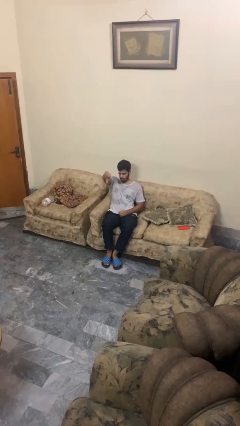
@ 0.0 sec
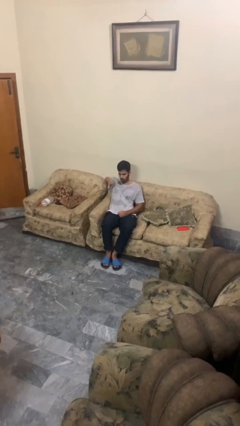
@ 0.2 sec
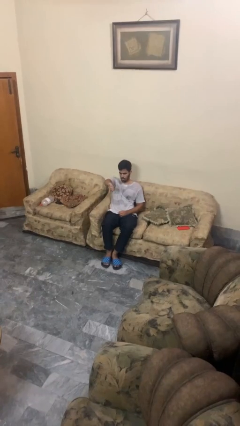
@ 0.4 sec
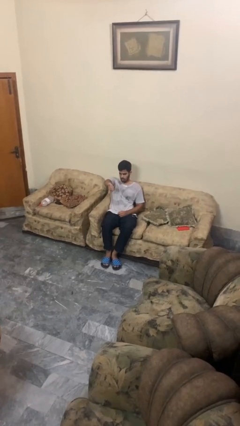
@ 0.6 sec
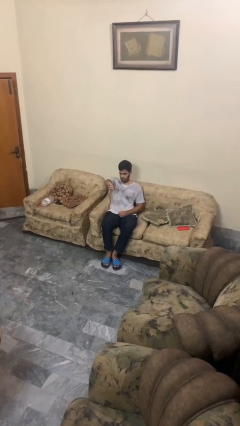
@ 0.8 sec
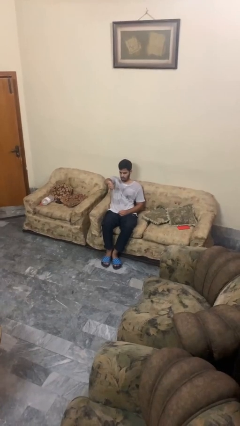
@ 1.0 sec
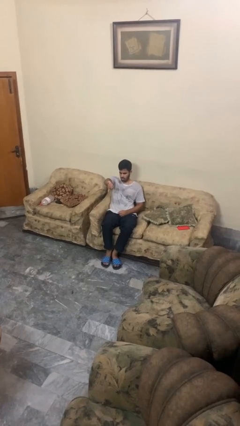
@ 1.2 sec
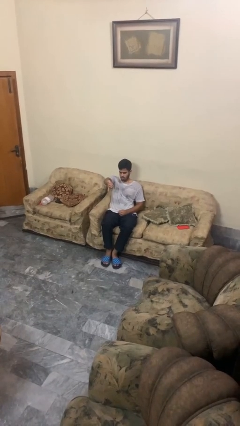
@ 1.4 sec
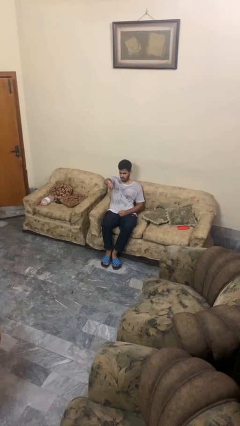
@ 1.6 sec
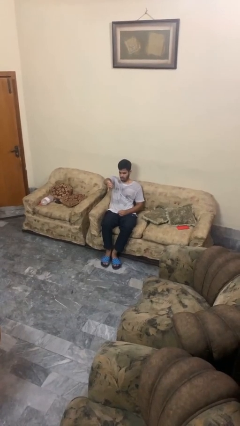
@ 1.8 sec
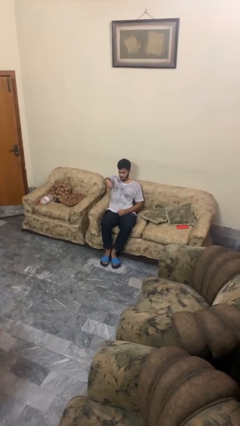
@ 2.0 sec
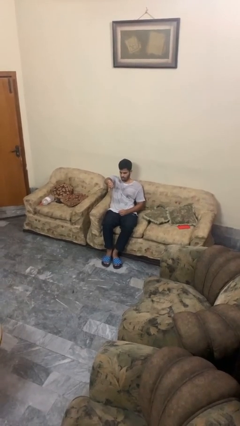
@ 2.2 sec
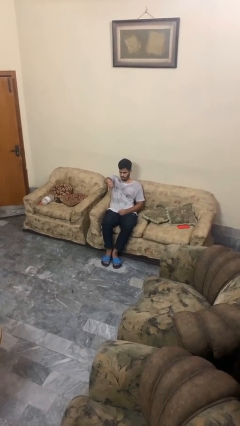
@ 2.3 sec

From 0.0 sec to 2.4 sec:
person gestures thumbs down

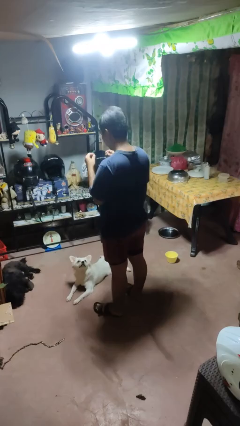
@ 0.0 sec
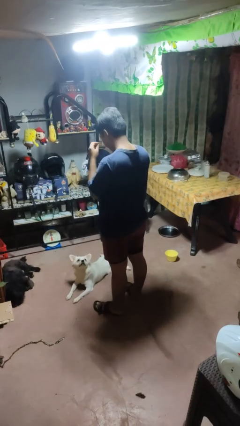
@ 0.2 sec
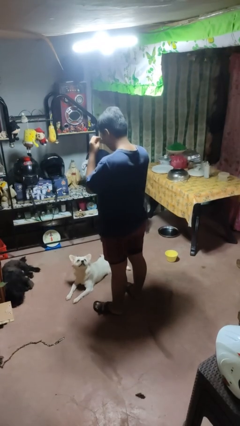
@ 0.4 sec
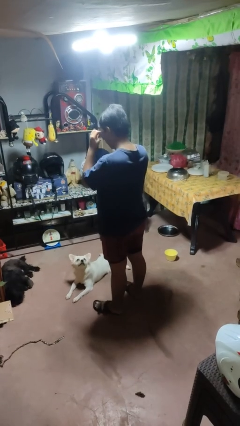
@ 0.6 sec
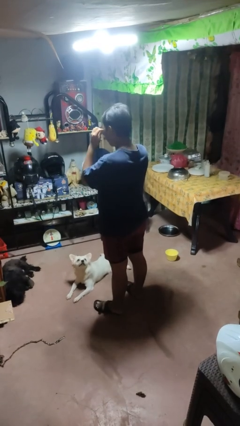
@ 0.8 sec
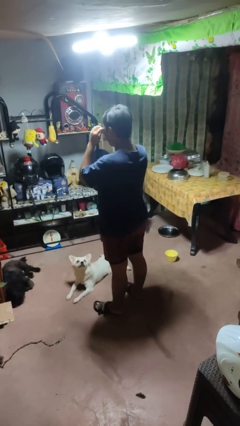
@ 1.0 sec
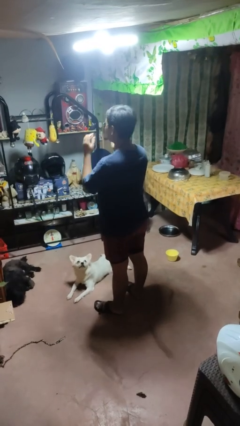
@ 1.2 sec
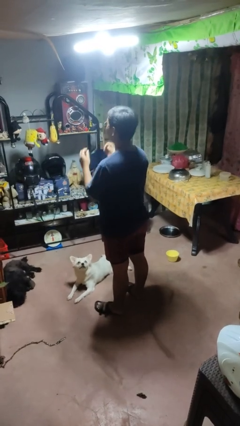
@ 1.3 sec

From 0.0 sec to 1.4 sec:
person puts on sunglasses

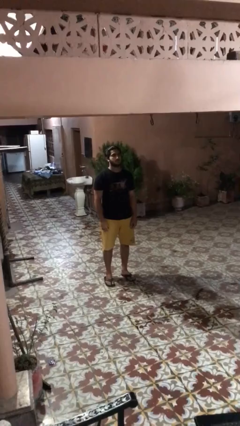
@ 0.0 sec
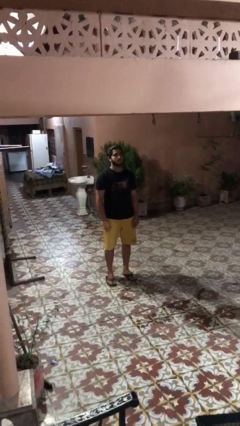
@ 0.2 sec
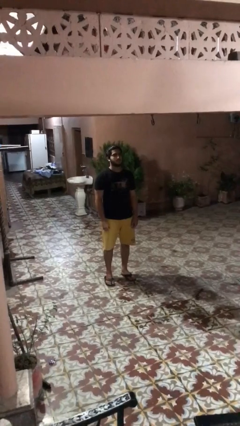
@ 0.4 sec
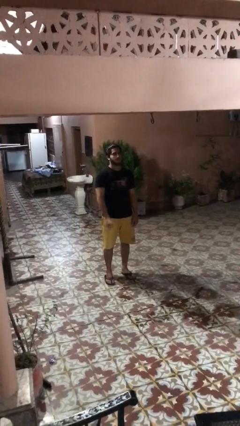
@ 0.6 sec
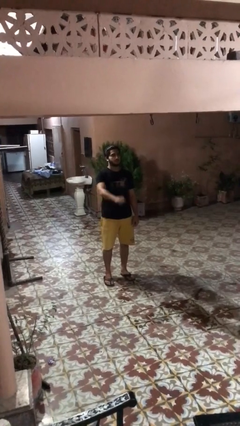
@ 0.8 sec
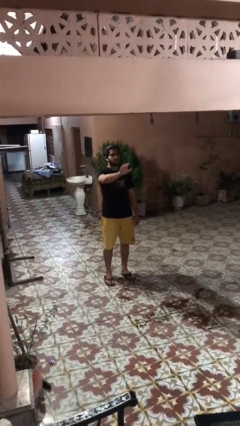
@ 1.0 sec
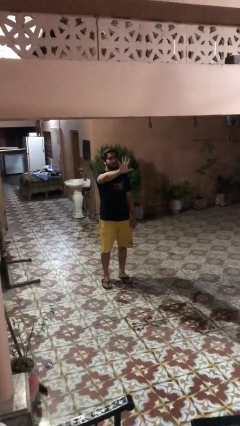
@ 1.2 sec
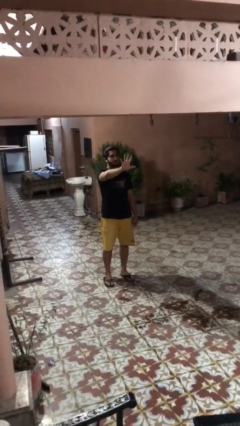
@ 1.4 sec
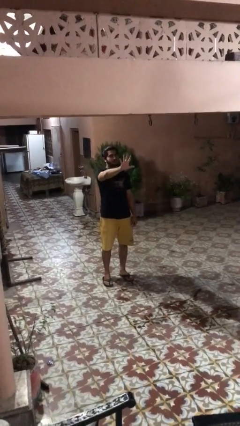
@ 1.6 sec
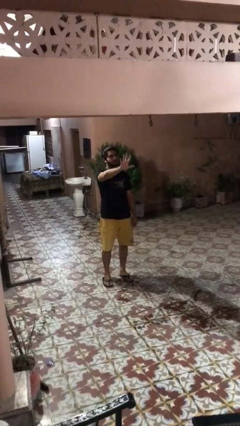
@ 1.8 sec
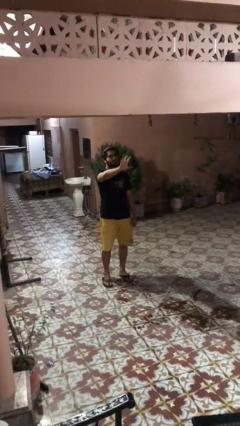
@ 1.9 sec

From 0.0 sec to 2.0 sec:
person gestures number five

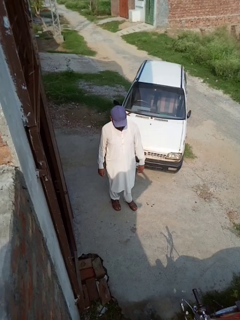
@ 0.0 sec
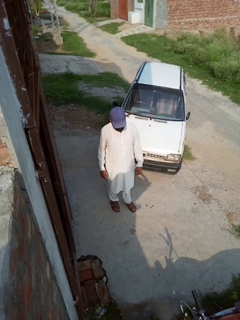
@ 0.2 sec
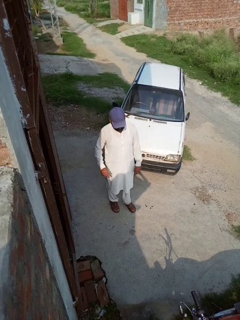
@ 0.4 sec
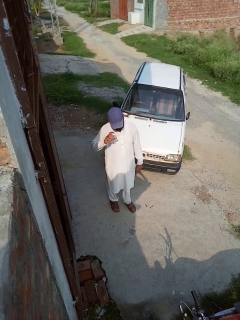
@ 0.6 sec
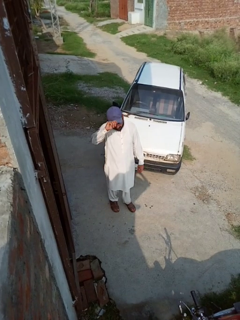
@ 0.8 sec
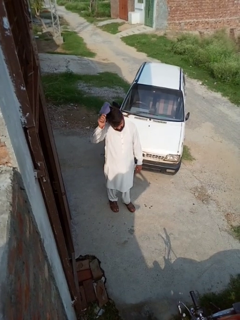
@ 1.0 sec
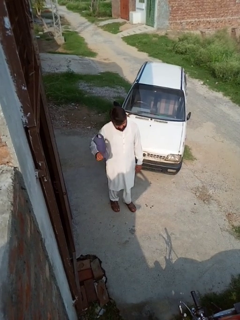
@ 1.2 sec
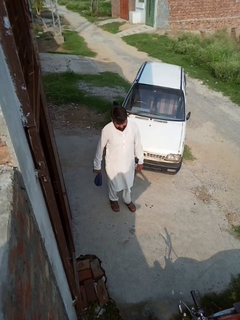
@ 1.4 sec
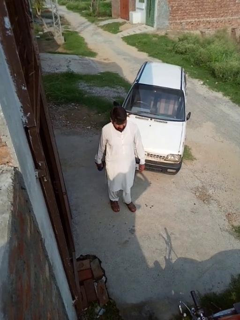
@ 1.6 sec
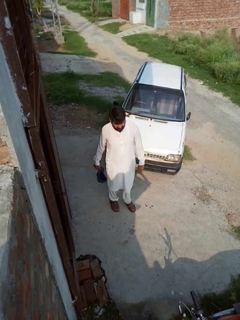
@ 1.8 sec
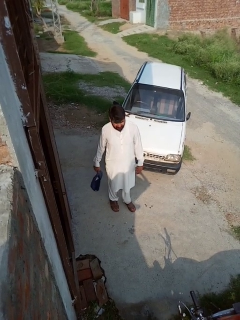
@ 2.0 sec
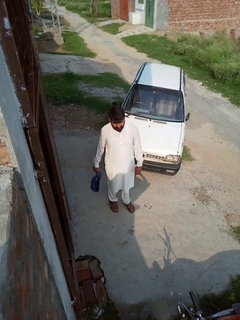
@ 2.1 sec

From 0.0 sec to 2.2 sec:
person takes off hat

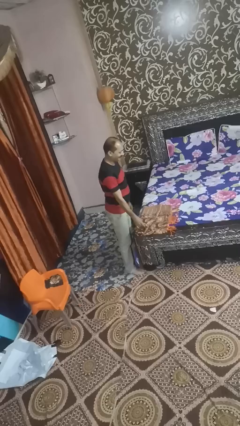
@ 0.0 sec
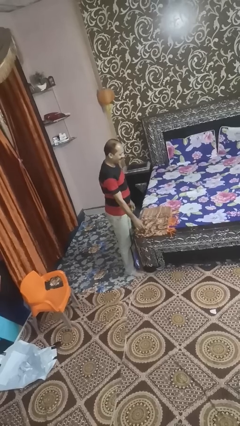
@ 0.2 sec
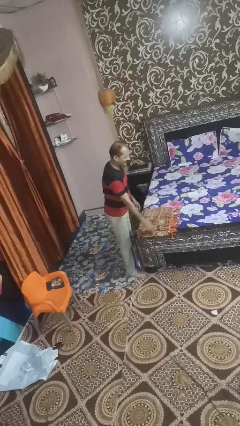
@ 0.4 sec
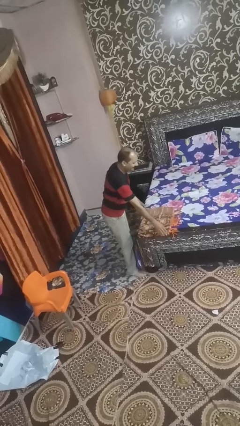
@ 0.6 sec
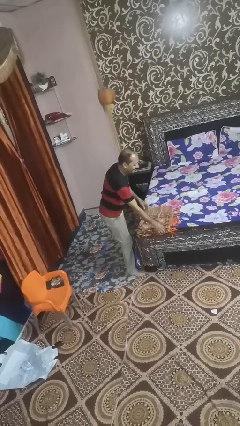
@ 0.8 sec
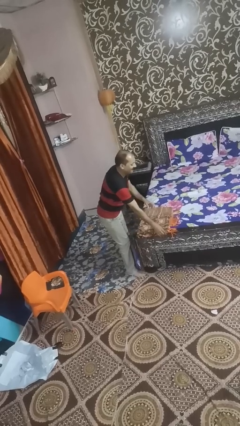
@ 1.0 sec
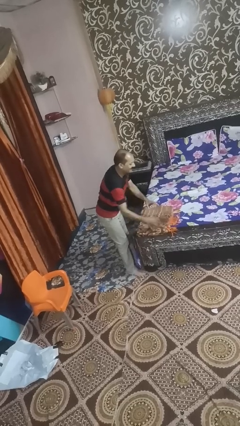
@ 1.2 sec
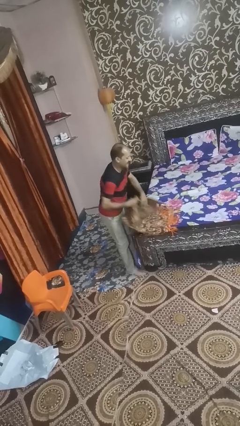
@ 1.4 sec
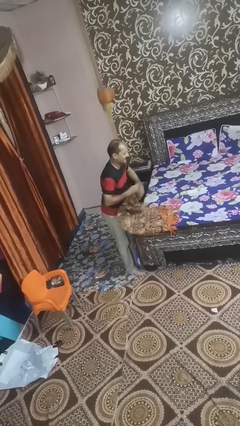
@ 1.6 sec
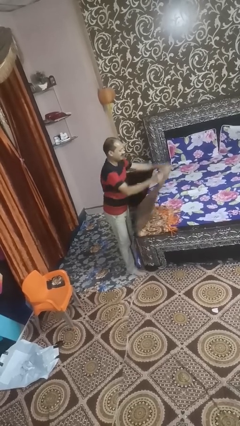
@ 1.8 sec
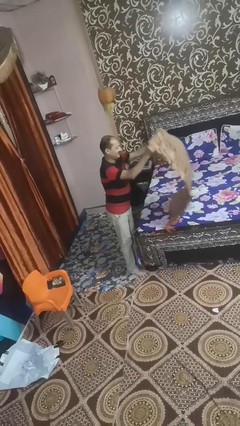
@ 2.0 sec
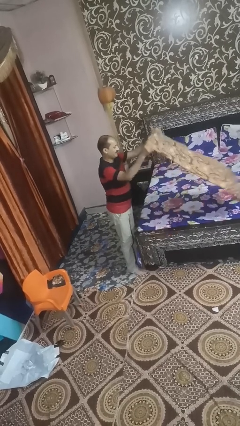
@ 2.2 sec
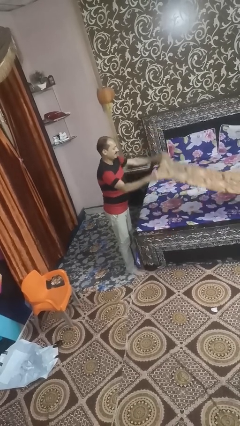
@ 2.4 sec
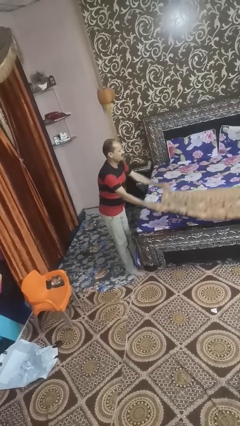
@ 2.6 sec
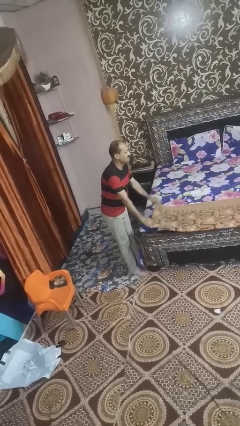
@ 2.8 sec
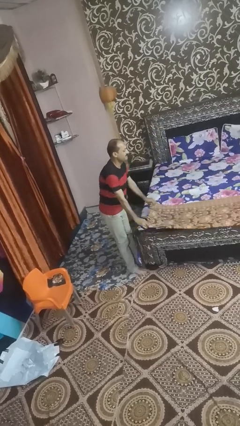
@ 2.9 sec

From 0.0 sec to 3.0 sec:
person unfolds blanket

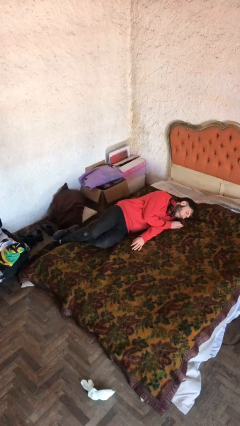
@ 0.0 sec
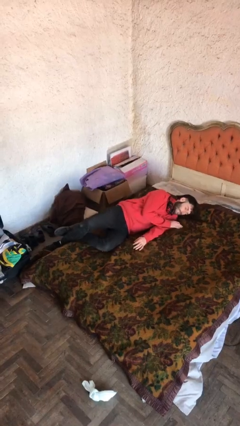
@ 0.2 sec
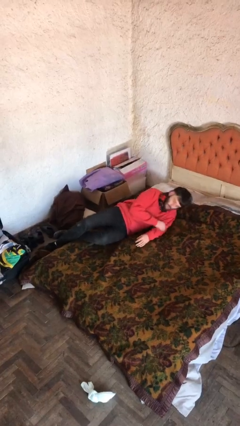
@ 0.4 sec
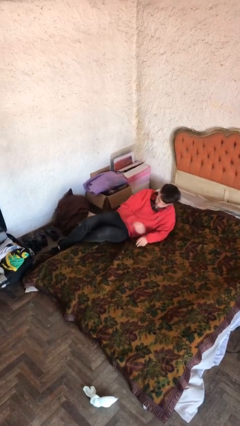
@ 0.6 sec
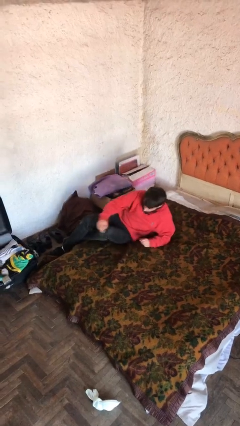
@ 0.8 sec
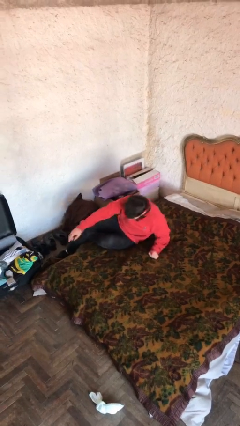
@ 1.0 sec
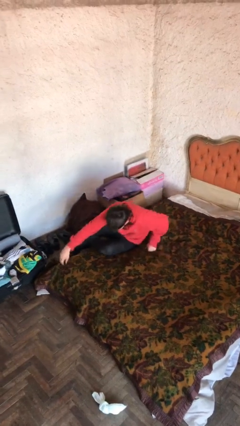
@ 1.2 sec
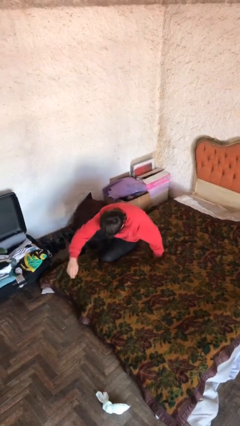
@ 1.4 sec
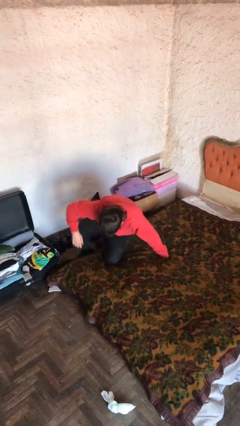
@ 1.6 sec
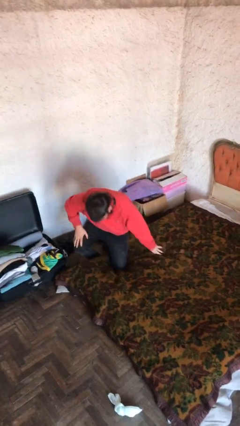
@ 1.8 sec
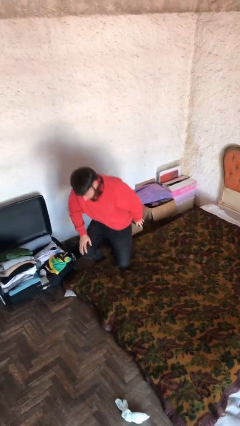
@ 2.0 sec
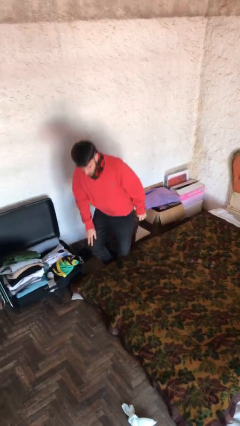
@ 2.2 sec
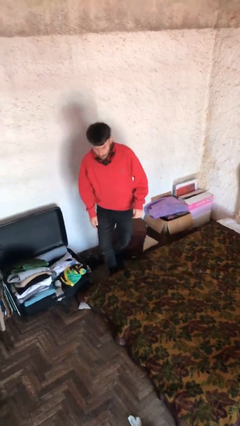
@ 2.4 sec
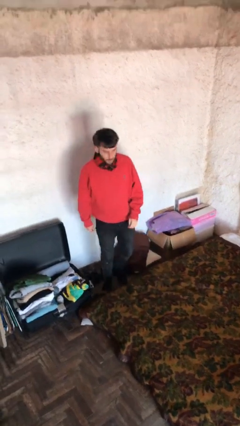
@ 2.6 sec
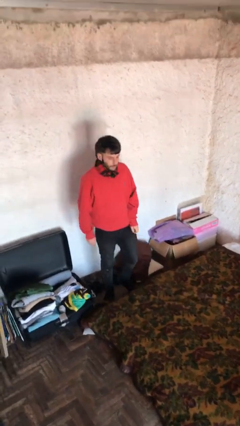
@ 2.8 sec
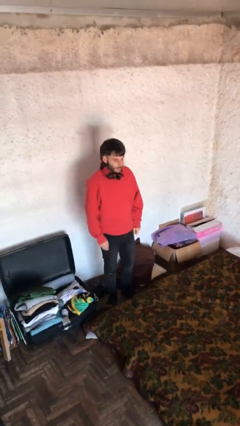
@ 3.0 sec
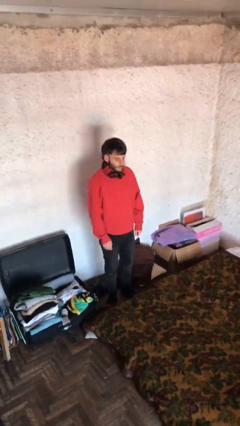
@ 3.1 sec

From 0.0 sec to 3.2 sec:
person stands up

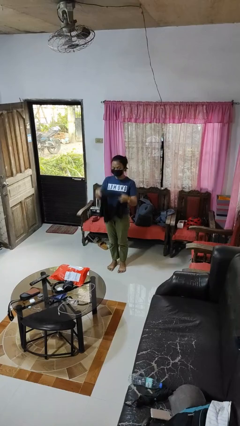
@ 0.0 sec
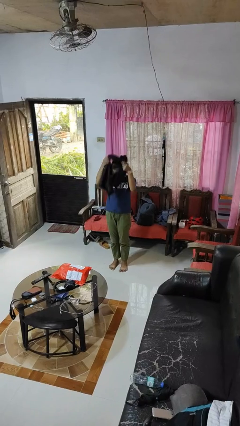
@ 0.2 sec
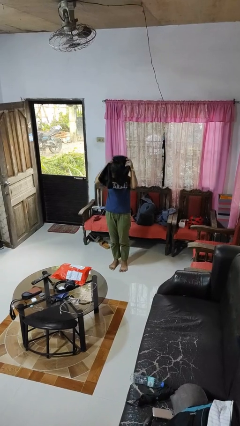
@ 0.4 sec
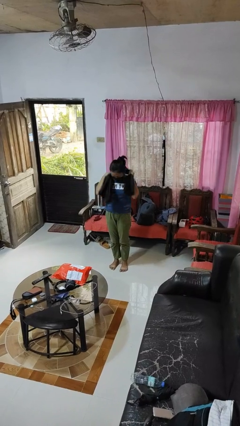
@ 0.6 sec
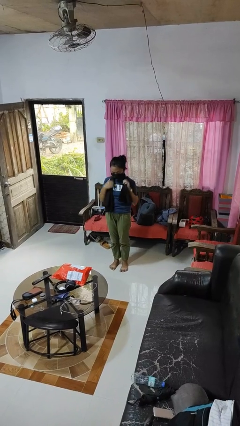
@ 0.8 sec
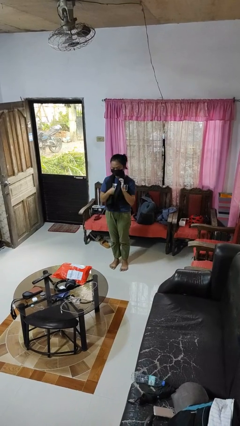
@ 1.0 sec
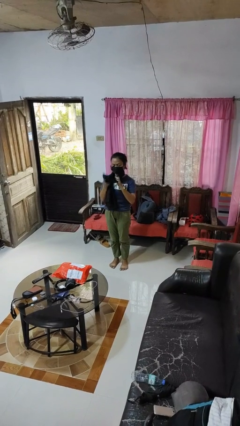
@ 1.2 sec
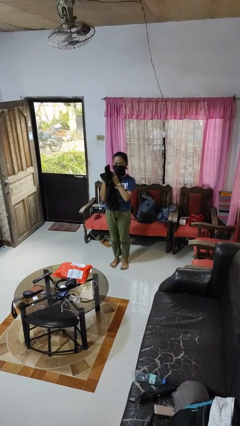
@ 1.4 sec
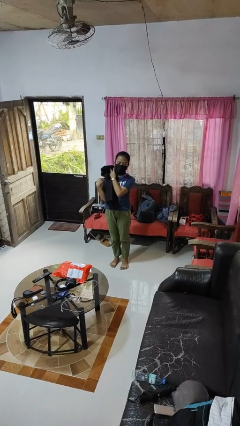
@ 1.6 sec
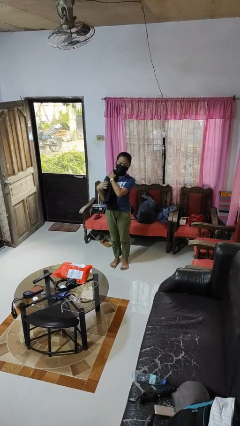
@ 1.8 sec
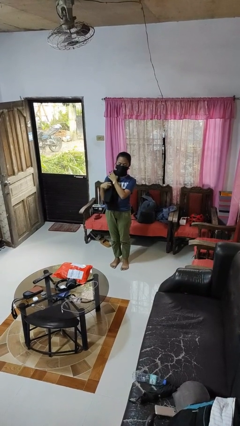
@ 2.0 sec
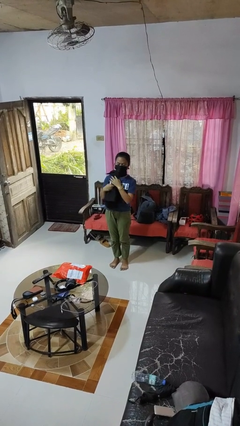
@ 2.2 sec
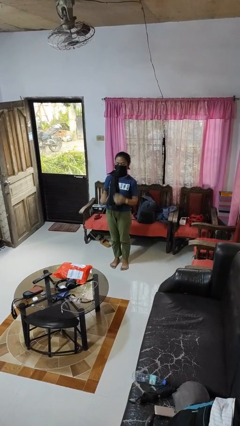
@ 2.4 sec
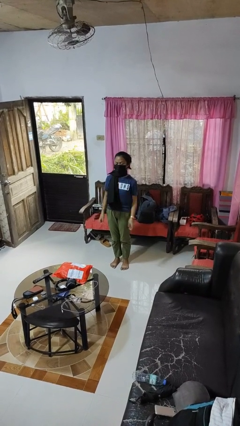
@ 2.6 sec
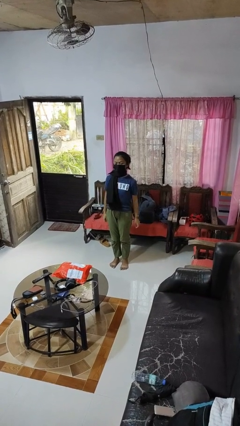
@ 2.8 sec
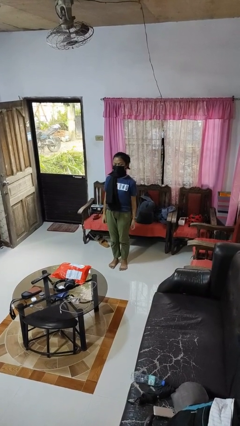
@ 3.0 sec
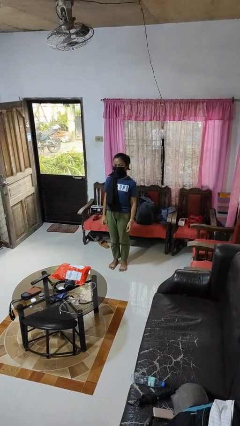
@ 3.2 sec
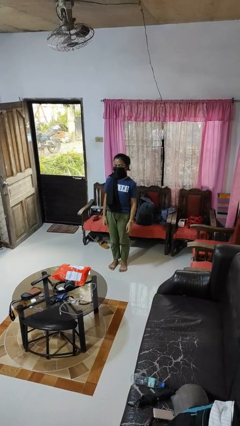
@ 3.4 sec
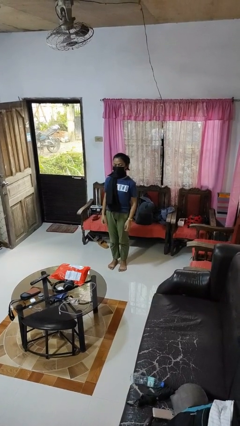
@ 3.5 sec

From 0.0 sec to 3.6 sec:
person puts on scarf
